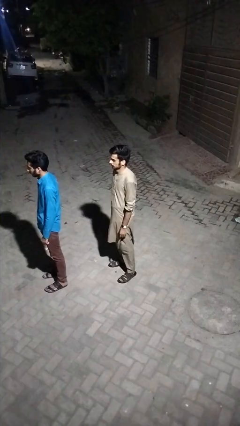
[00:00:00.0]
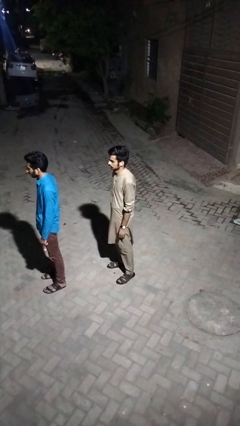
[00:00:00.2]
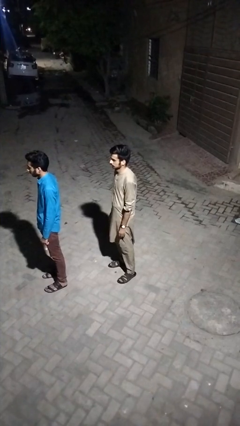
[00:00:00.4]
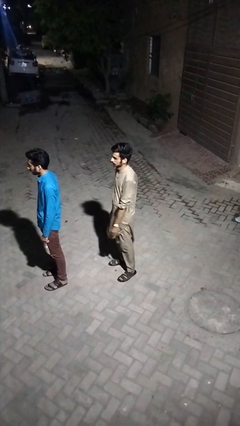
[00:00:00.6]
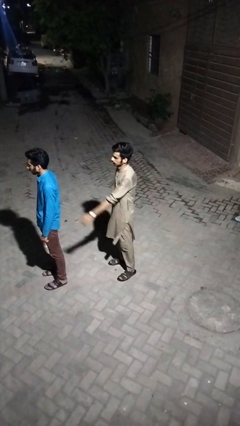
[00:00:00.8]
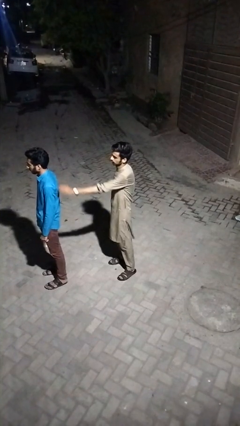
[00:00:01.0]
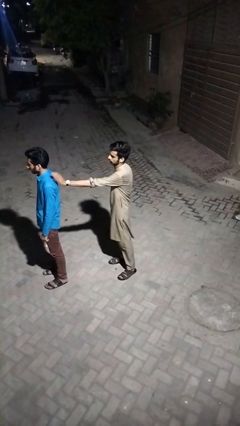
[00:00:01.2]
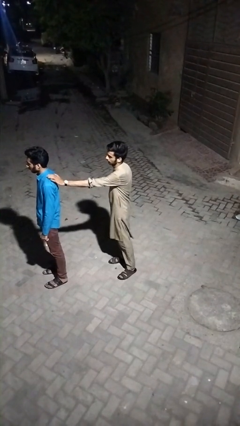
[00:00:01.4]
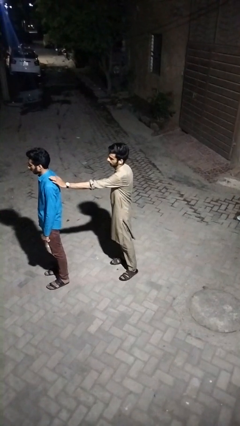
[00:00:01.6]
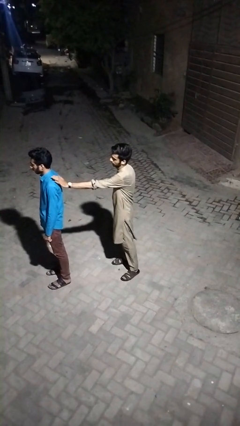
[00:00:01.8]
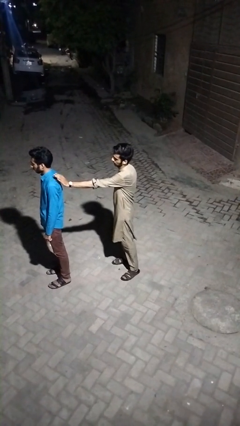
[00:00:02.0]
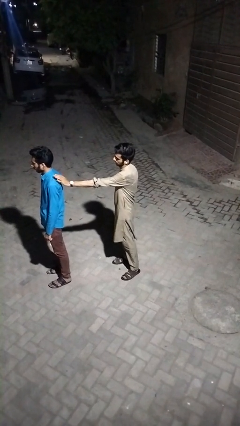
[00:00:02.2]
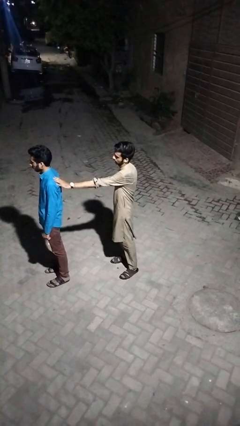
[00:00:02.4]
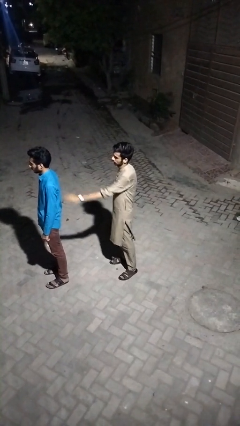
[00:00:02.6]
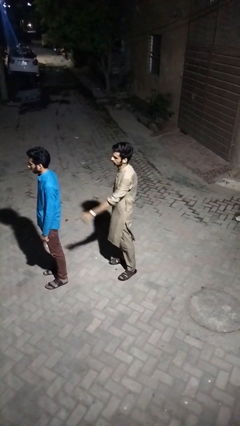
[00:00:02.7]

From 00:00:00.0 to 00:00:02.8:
person touches back of person

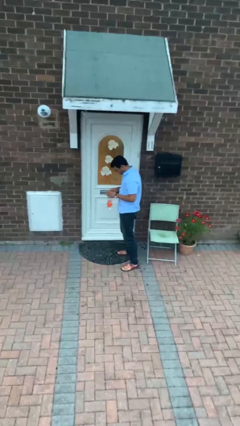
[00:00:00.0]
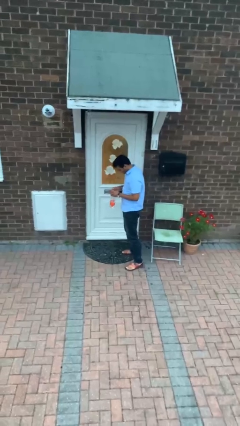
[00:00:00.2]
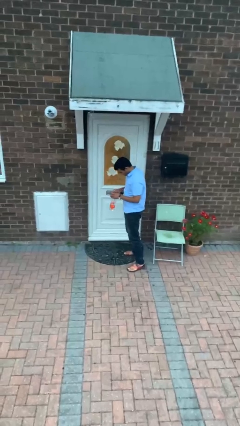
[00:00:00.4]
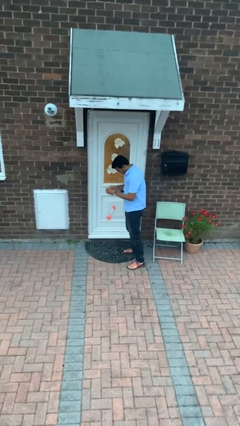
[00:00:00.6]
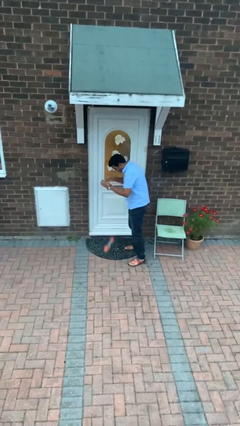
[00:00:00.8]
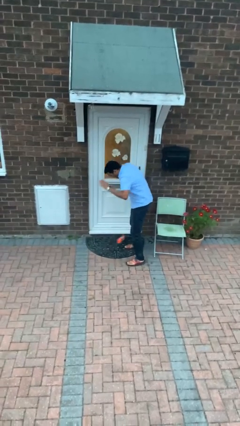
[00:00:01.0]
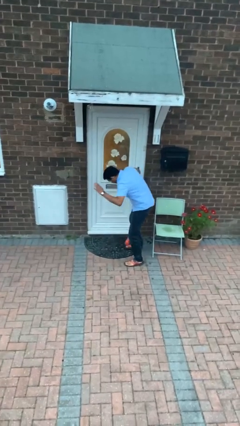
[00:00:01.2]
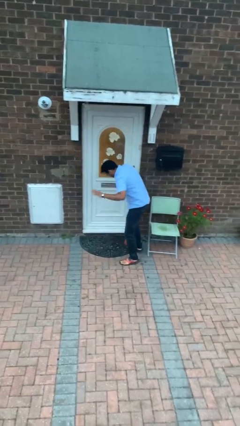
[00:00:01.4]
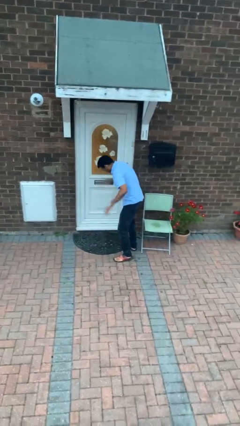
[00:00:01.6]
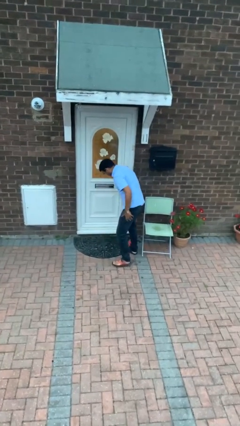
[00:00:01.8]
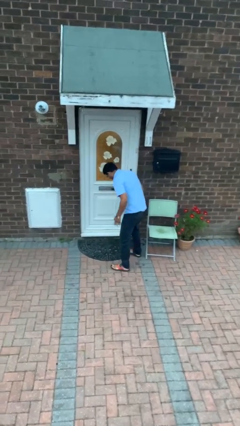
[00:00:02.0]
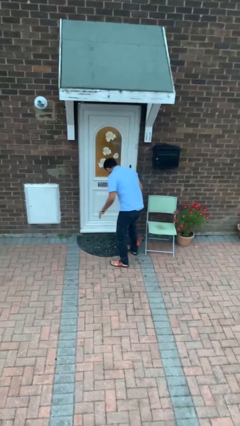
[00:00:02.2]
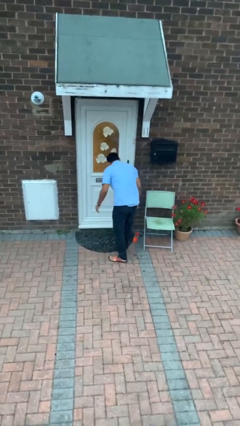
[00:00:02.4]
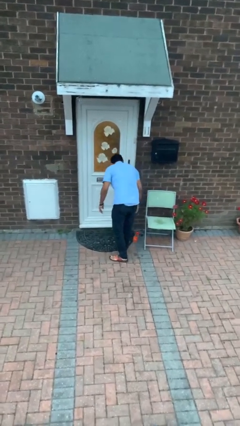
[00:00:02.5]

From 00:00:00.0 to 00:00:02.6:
person drops object

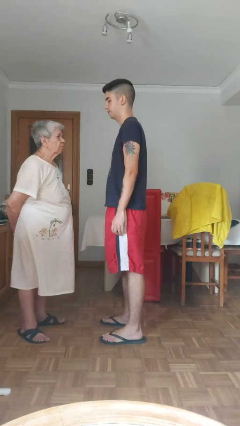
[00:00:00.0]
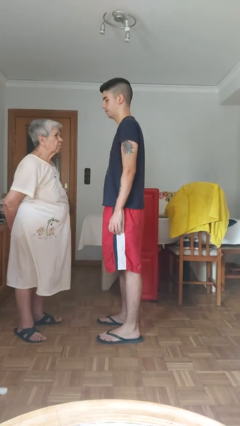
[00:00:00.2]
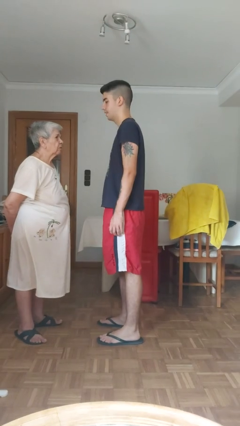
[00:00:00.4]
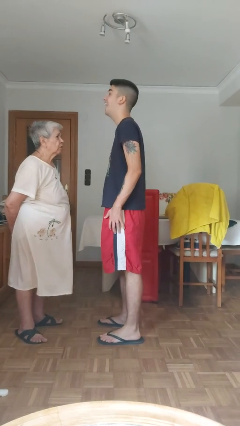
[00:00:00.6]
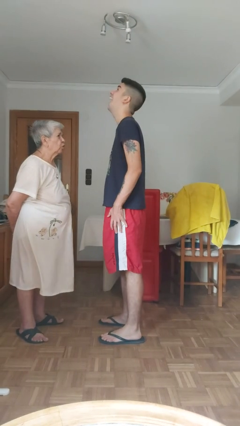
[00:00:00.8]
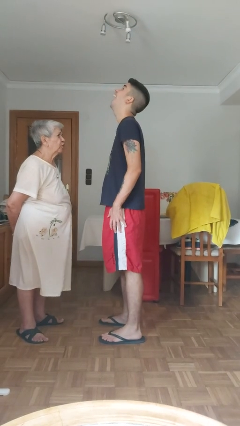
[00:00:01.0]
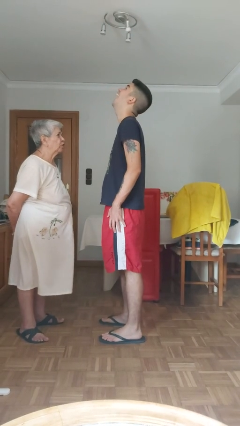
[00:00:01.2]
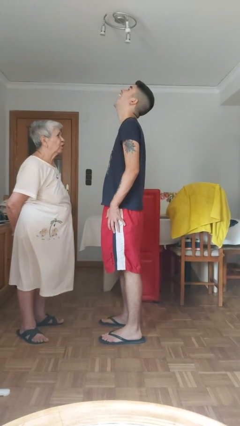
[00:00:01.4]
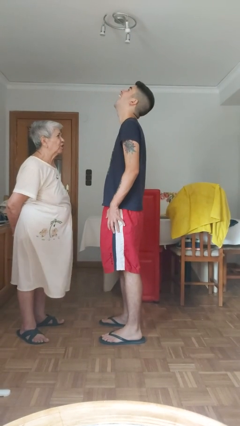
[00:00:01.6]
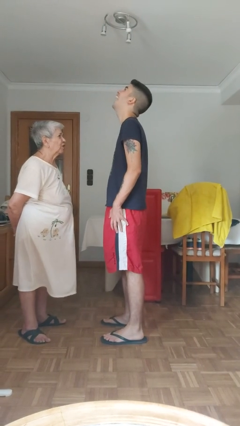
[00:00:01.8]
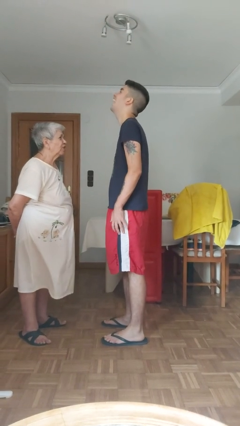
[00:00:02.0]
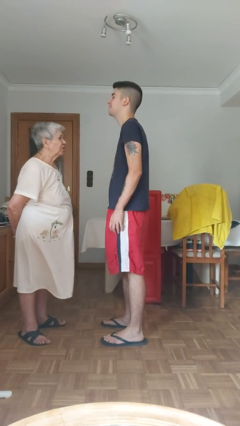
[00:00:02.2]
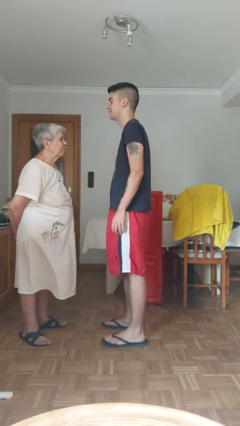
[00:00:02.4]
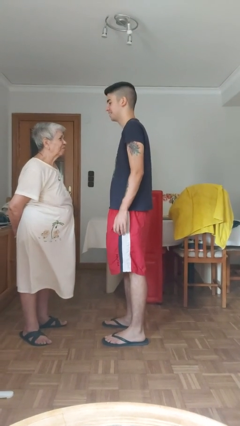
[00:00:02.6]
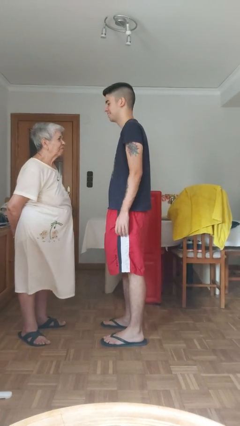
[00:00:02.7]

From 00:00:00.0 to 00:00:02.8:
person laughs with person

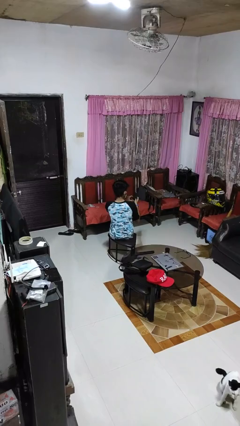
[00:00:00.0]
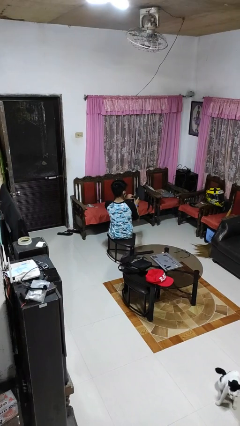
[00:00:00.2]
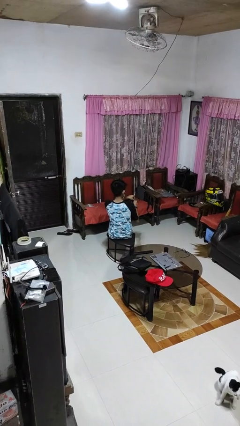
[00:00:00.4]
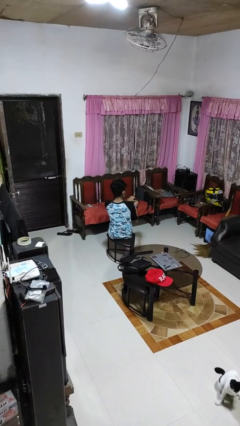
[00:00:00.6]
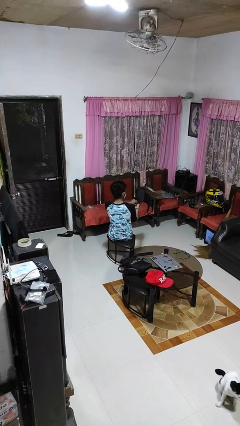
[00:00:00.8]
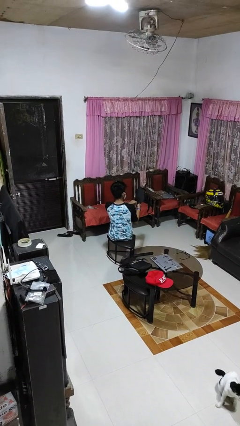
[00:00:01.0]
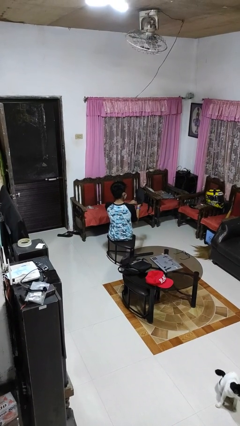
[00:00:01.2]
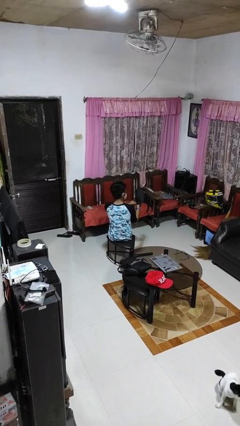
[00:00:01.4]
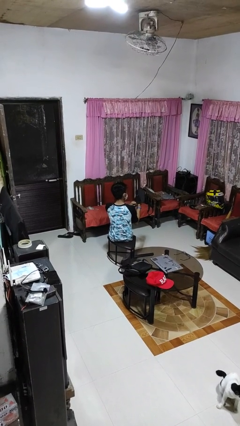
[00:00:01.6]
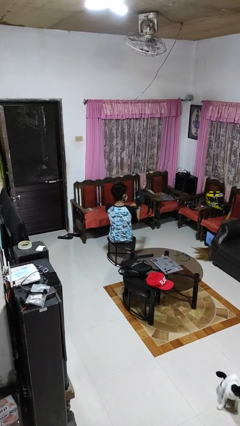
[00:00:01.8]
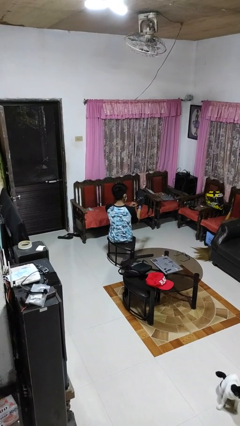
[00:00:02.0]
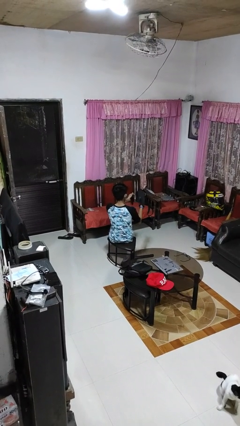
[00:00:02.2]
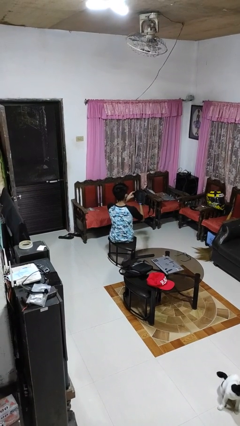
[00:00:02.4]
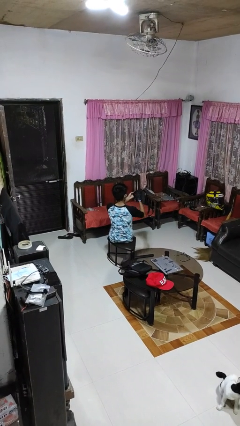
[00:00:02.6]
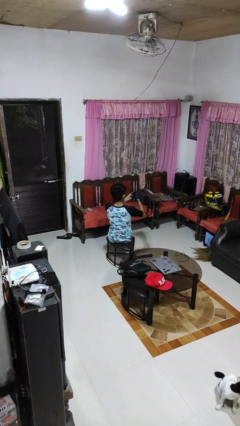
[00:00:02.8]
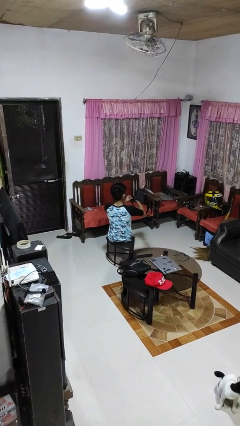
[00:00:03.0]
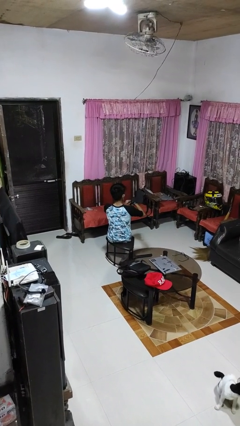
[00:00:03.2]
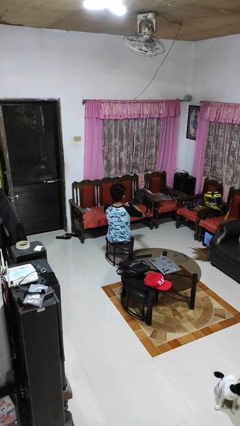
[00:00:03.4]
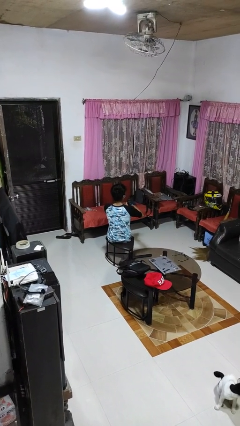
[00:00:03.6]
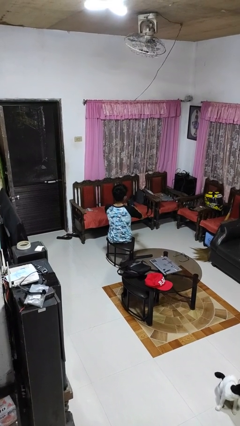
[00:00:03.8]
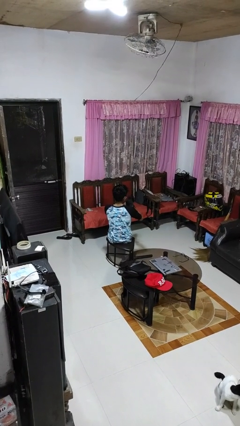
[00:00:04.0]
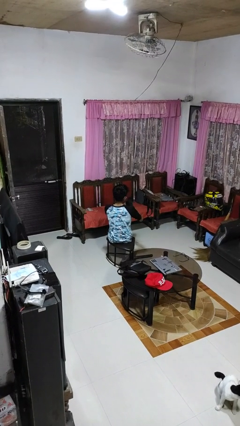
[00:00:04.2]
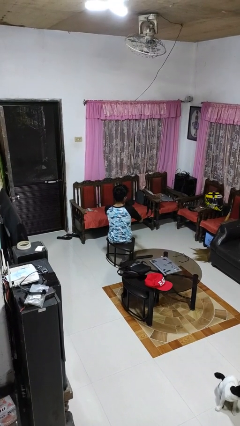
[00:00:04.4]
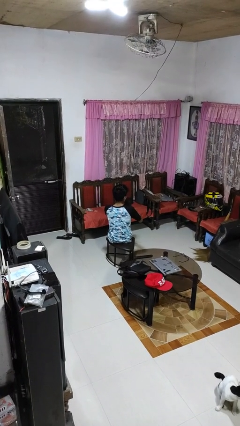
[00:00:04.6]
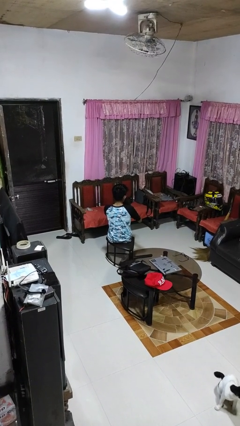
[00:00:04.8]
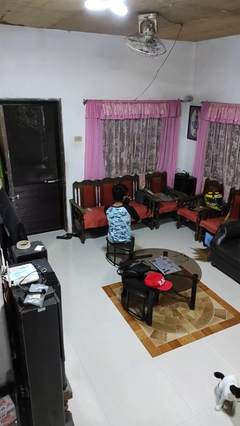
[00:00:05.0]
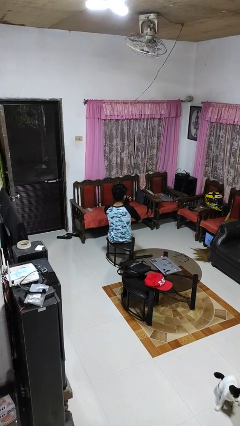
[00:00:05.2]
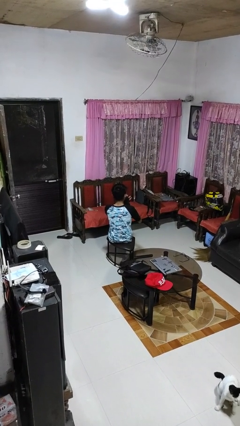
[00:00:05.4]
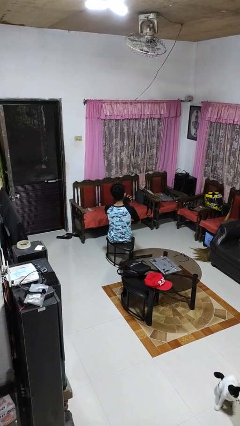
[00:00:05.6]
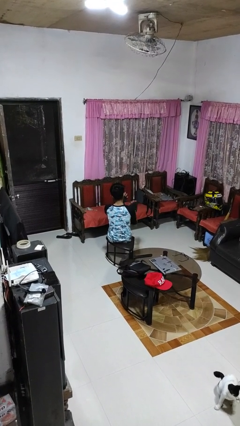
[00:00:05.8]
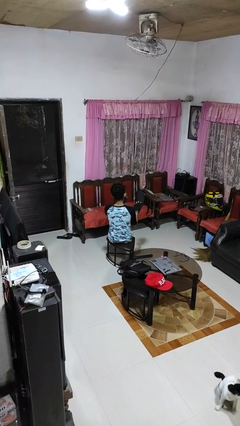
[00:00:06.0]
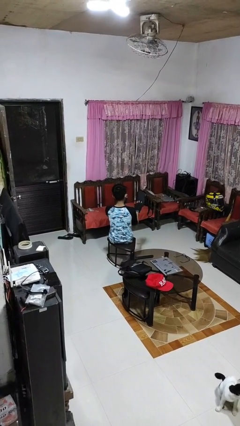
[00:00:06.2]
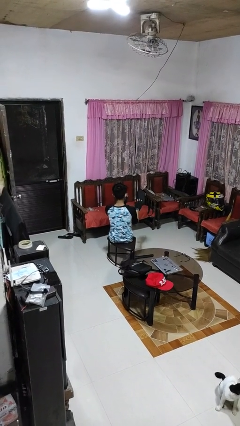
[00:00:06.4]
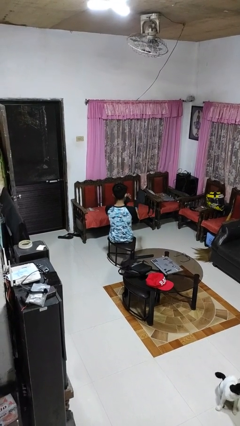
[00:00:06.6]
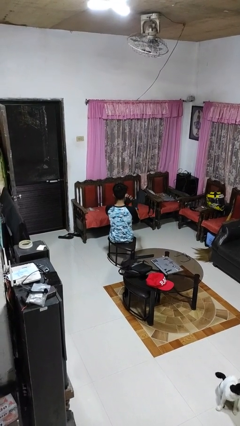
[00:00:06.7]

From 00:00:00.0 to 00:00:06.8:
person puts on gloves

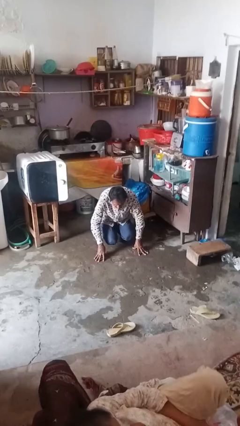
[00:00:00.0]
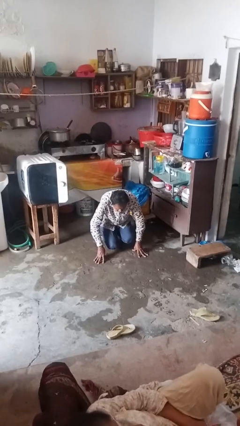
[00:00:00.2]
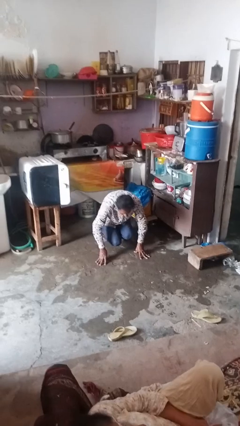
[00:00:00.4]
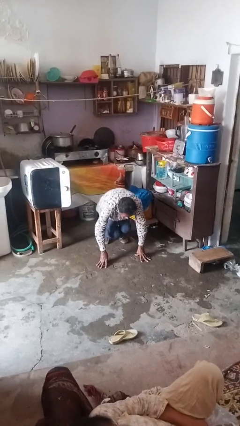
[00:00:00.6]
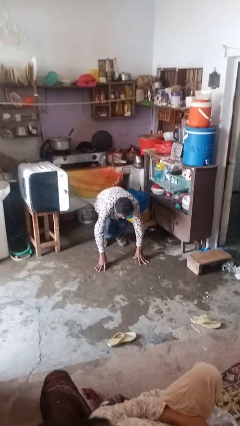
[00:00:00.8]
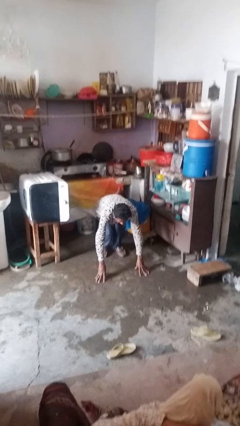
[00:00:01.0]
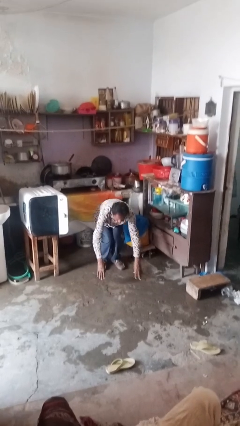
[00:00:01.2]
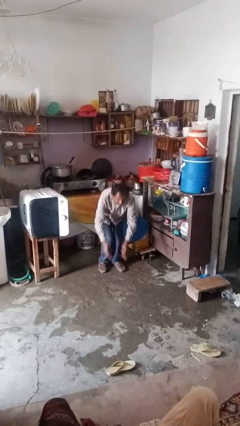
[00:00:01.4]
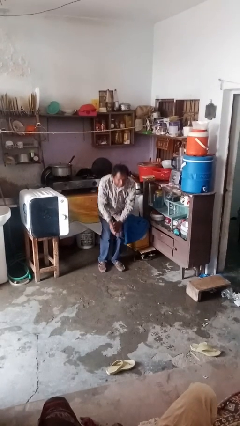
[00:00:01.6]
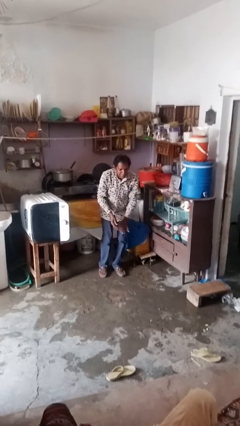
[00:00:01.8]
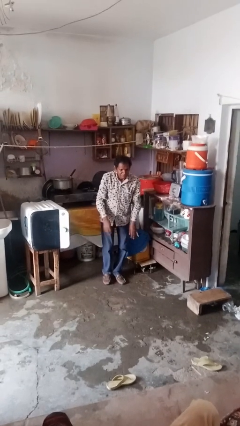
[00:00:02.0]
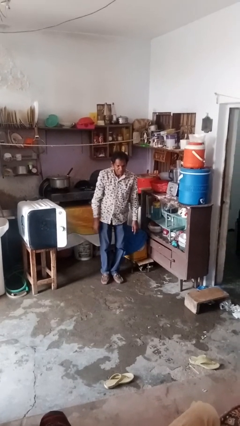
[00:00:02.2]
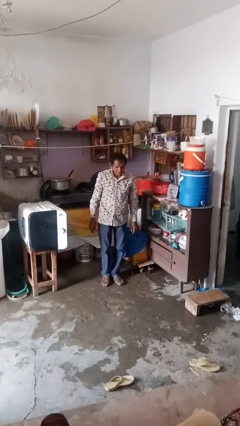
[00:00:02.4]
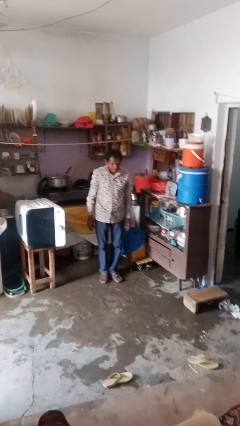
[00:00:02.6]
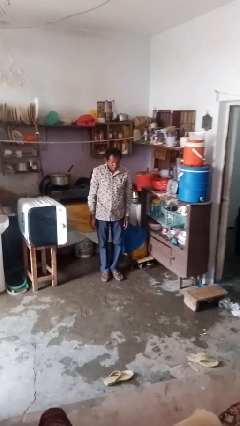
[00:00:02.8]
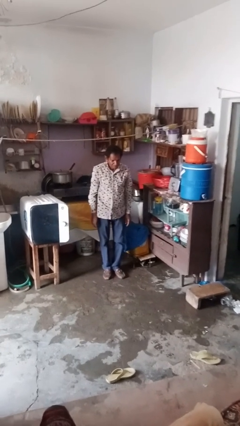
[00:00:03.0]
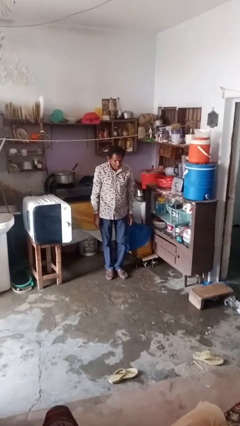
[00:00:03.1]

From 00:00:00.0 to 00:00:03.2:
person stands up from floor
